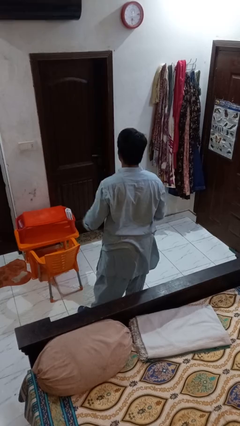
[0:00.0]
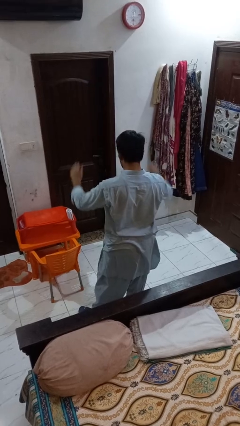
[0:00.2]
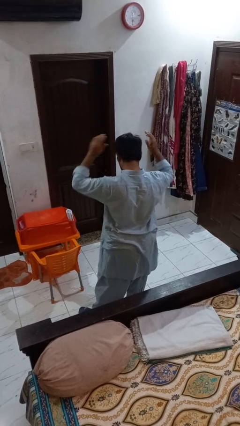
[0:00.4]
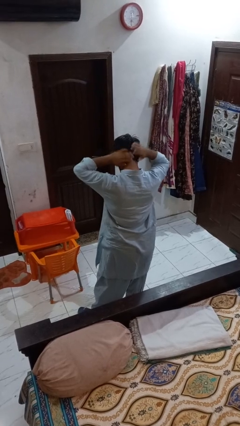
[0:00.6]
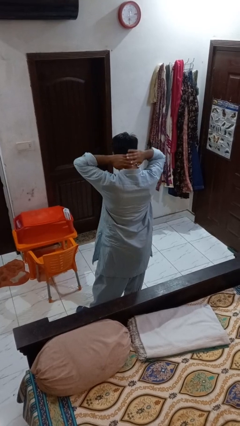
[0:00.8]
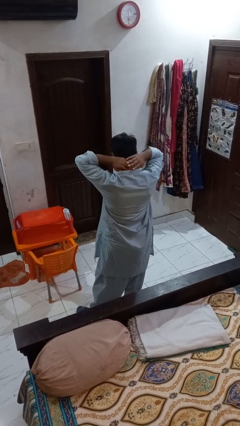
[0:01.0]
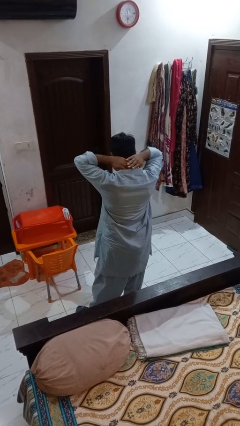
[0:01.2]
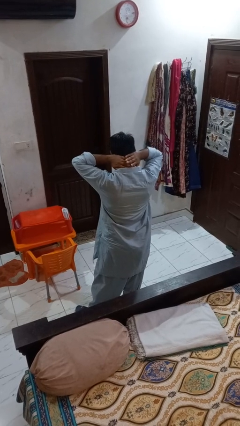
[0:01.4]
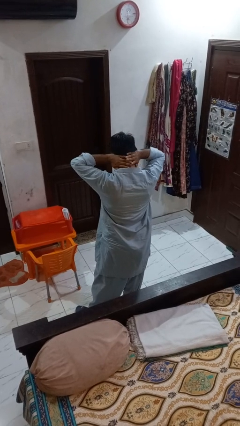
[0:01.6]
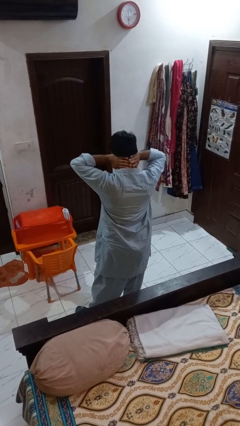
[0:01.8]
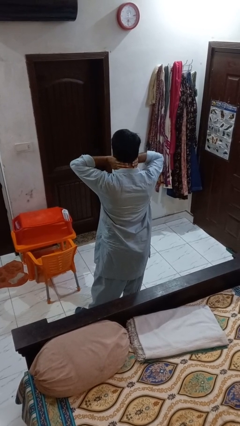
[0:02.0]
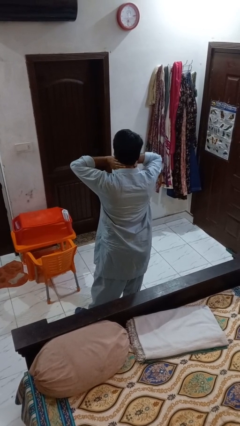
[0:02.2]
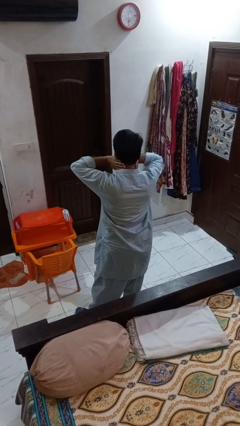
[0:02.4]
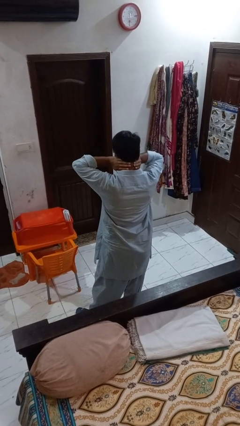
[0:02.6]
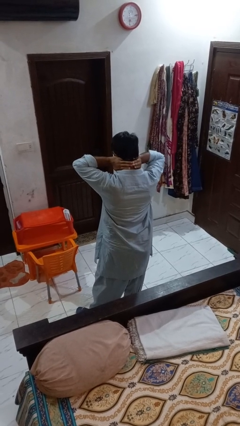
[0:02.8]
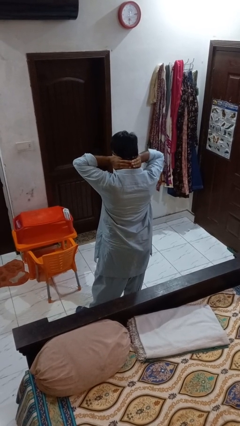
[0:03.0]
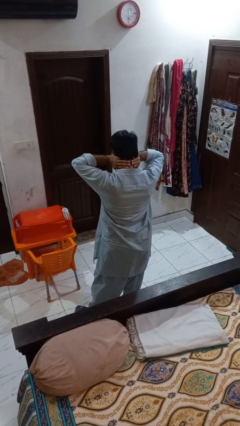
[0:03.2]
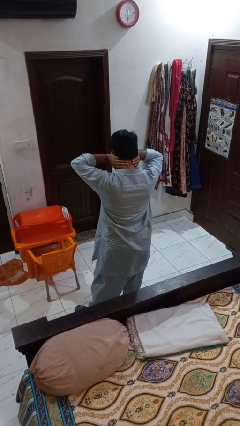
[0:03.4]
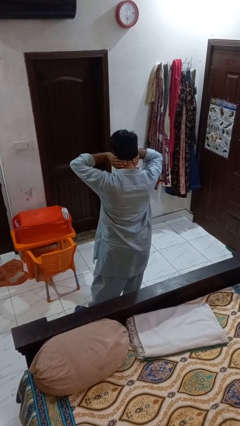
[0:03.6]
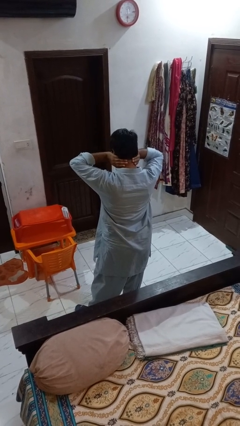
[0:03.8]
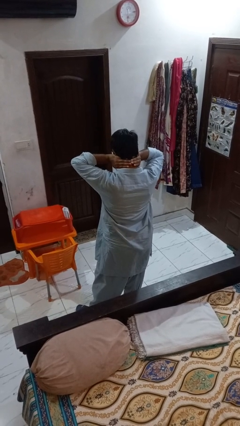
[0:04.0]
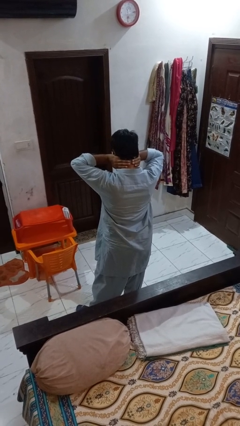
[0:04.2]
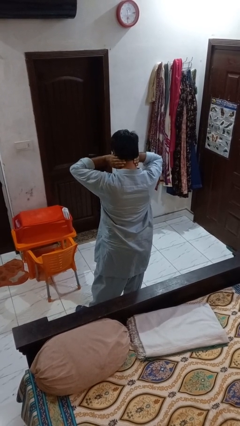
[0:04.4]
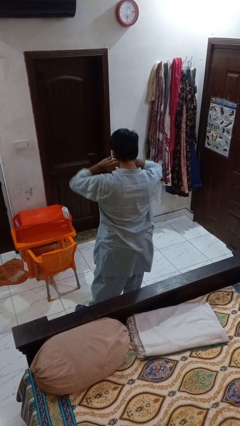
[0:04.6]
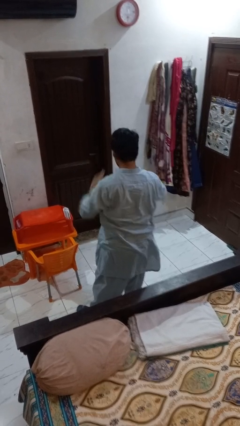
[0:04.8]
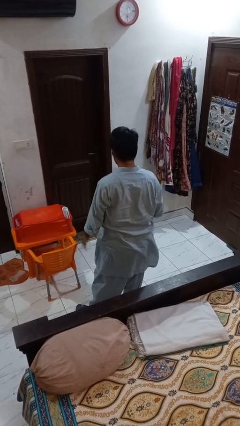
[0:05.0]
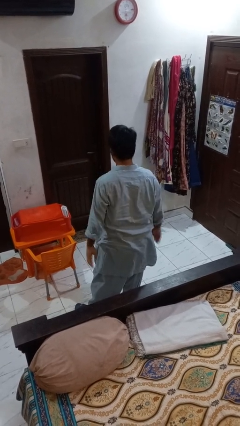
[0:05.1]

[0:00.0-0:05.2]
person rubs neck

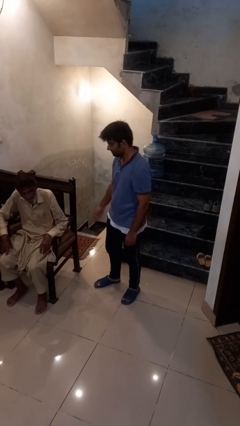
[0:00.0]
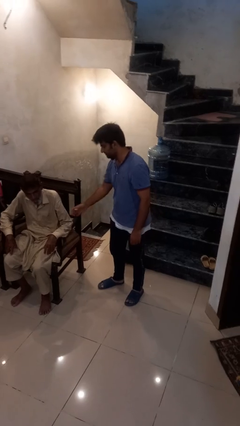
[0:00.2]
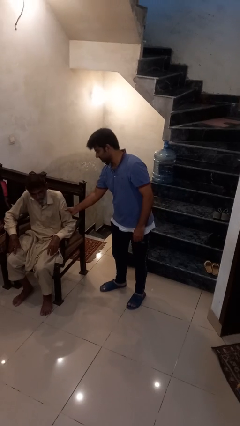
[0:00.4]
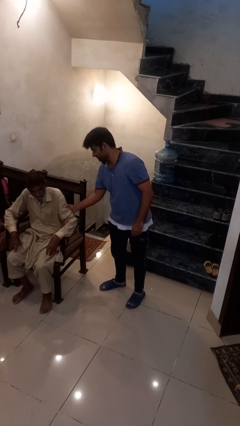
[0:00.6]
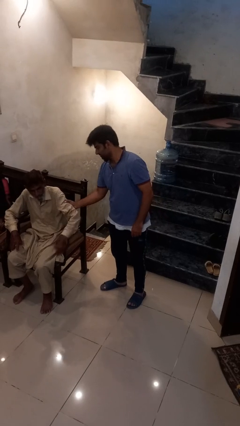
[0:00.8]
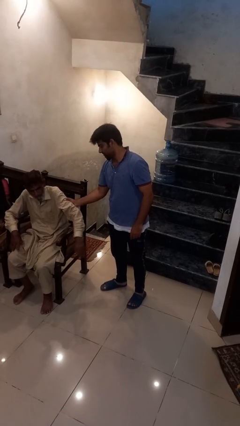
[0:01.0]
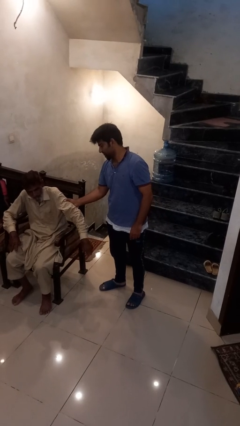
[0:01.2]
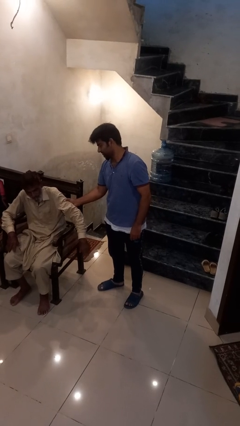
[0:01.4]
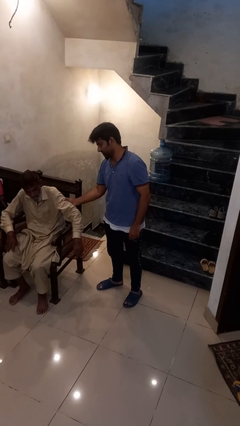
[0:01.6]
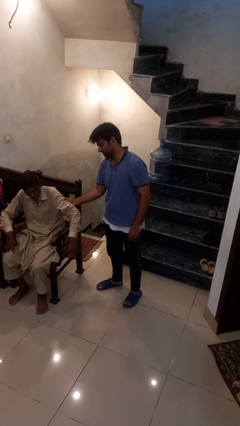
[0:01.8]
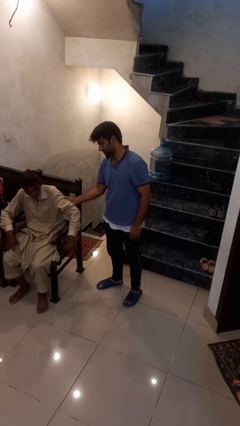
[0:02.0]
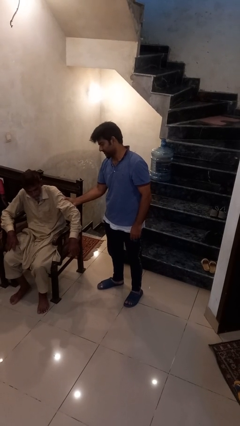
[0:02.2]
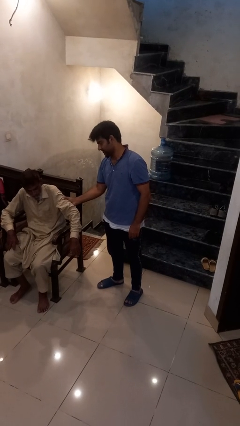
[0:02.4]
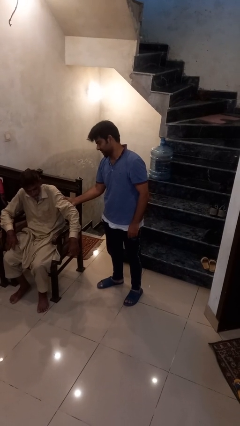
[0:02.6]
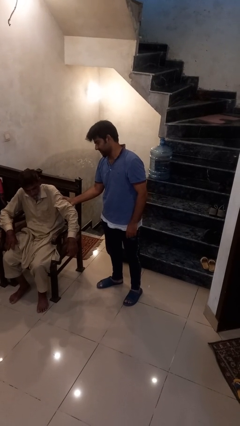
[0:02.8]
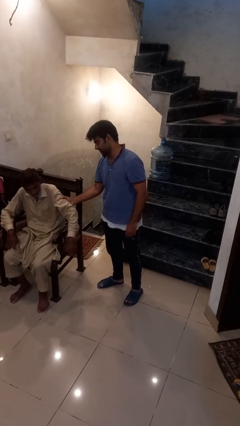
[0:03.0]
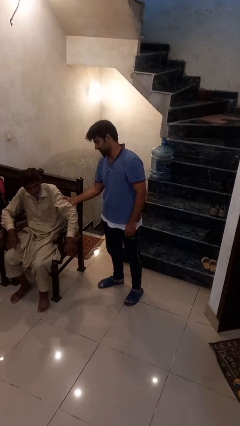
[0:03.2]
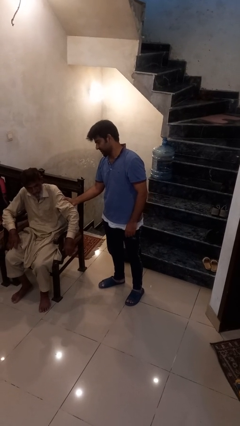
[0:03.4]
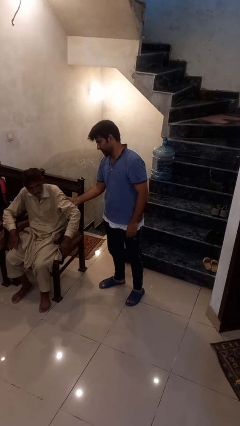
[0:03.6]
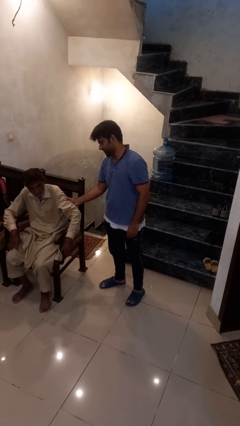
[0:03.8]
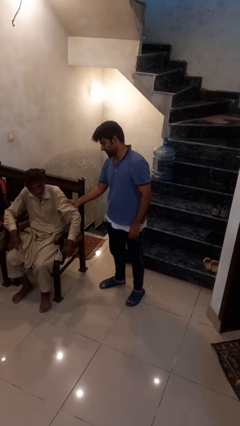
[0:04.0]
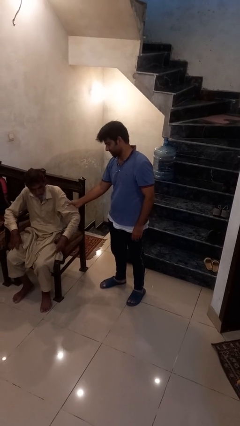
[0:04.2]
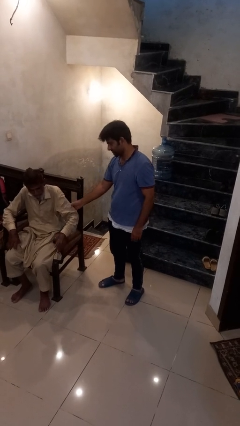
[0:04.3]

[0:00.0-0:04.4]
person grabs person by bicep

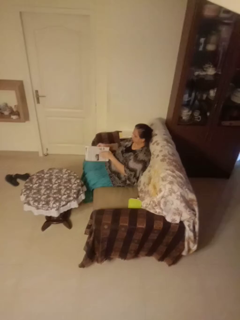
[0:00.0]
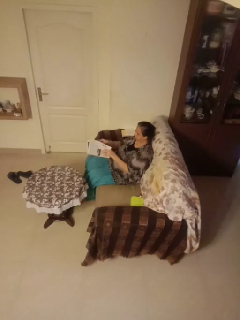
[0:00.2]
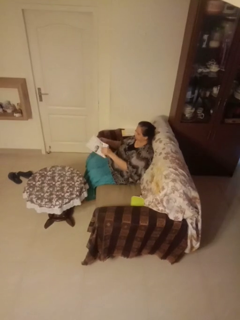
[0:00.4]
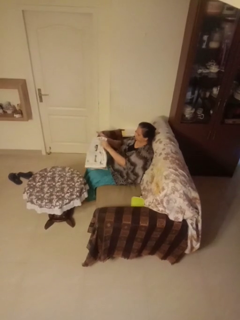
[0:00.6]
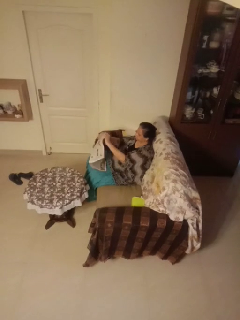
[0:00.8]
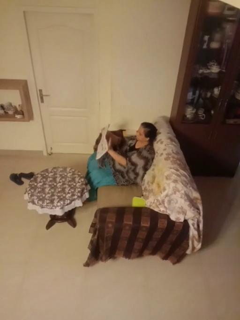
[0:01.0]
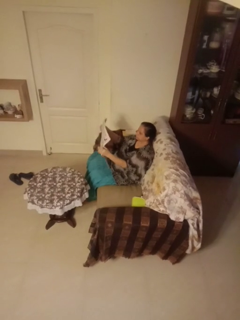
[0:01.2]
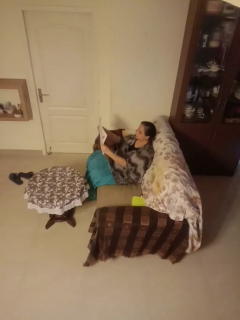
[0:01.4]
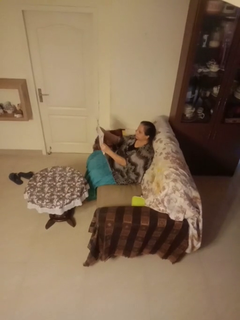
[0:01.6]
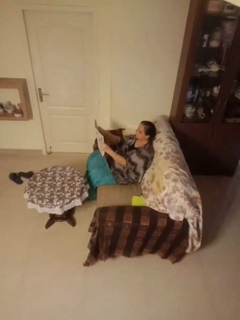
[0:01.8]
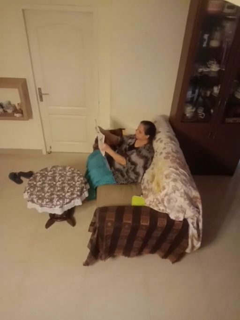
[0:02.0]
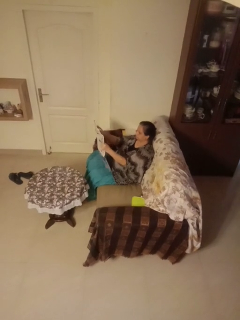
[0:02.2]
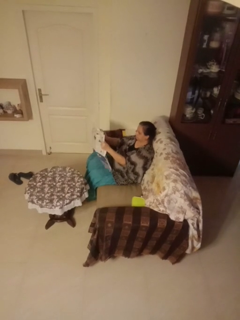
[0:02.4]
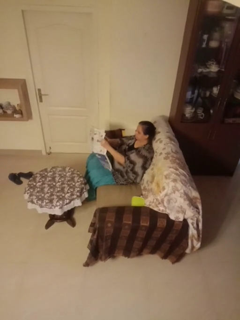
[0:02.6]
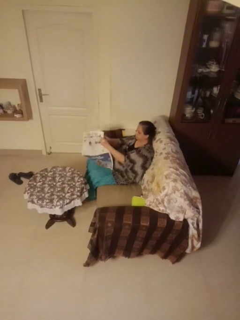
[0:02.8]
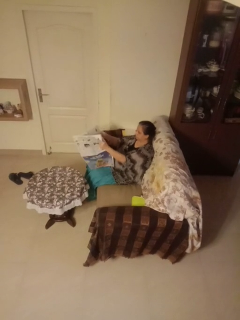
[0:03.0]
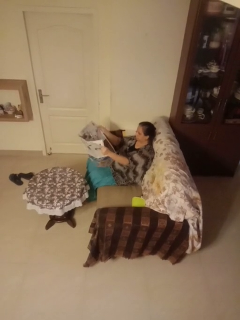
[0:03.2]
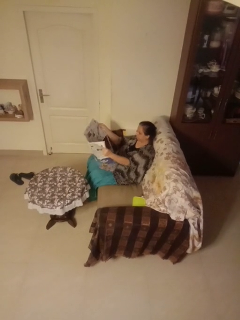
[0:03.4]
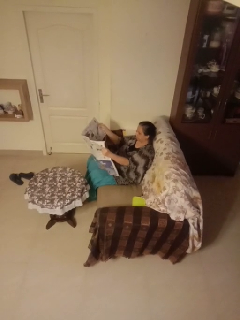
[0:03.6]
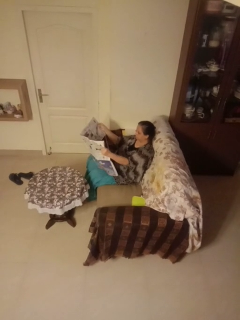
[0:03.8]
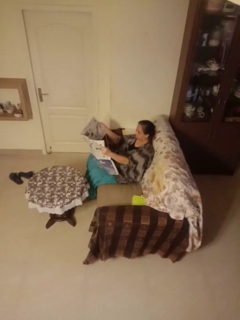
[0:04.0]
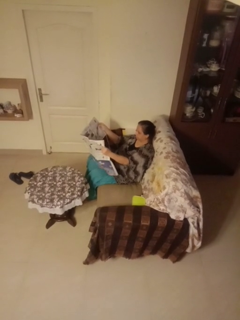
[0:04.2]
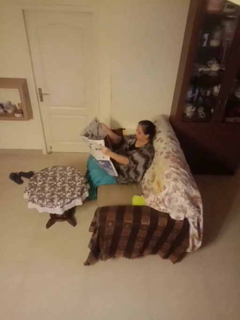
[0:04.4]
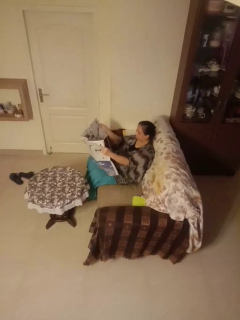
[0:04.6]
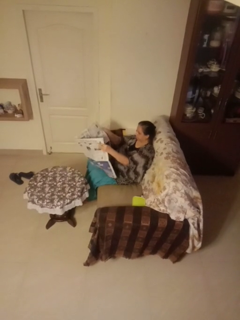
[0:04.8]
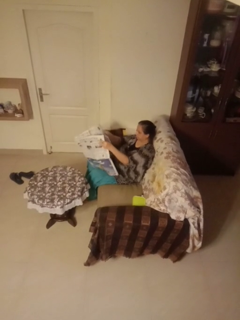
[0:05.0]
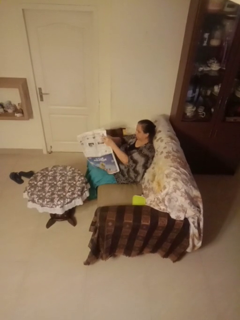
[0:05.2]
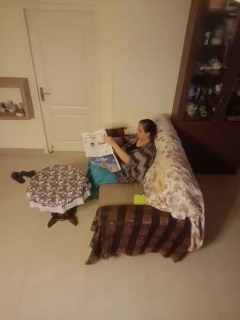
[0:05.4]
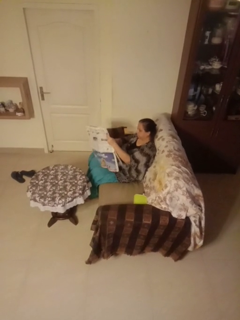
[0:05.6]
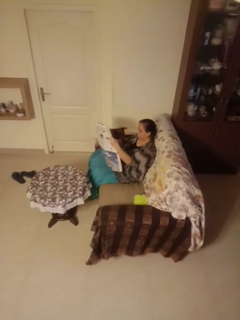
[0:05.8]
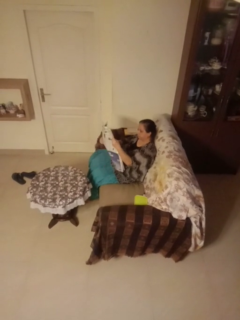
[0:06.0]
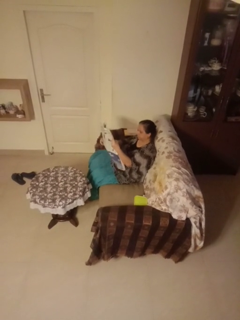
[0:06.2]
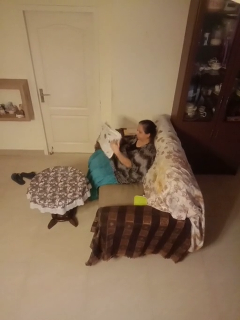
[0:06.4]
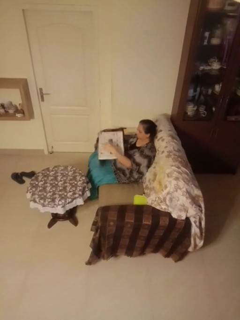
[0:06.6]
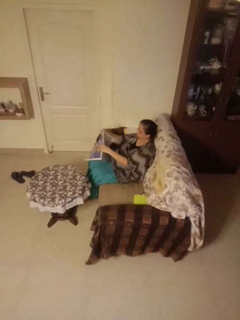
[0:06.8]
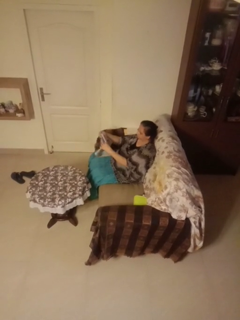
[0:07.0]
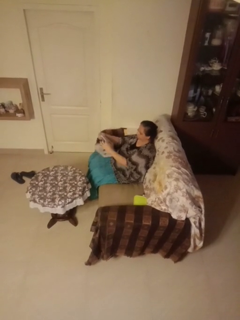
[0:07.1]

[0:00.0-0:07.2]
person reads newspaper

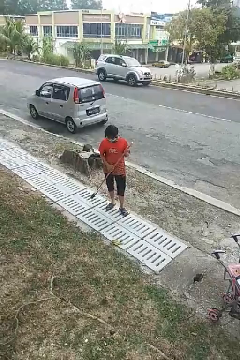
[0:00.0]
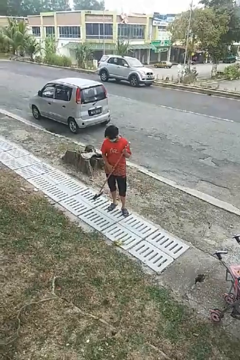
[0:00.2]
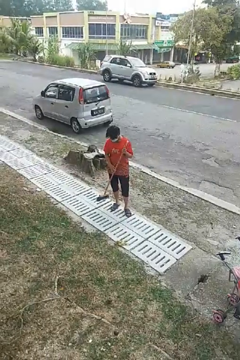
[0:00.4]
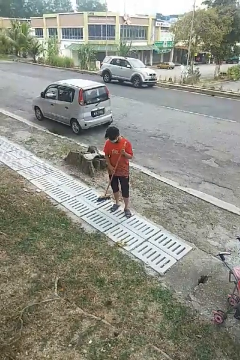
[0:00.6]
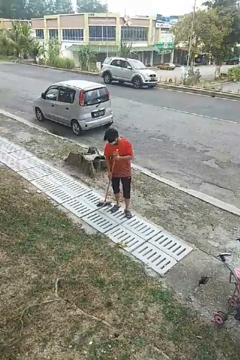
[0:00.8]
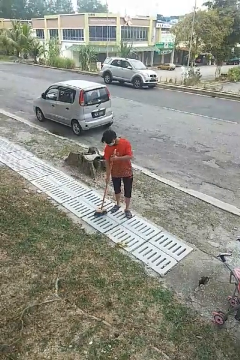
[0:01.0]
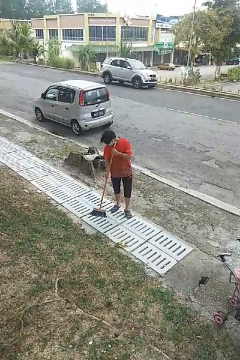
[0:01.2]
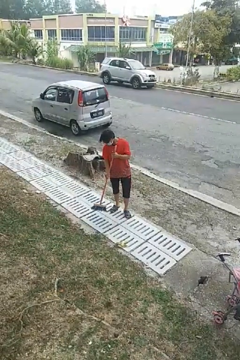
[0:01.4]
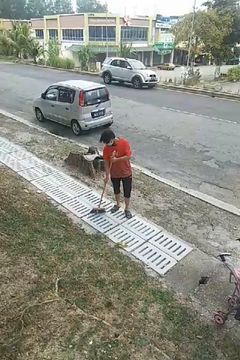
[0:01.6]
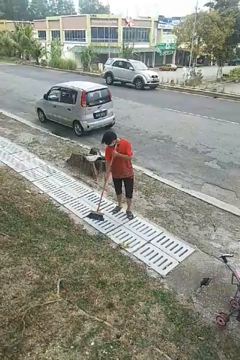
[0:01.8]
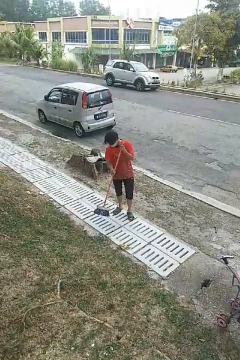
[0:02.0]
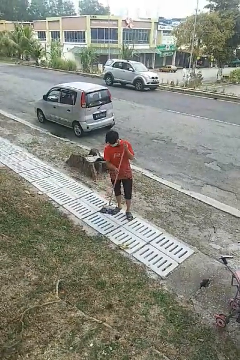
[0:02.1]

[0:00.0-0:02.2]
person sweeps floor

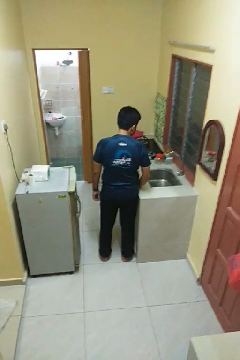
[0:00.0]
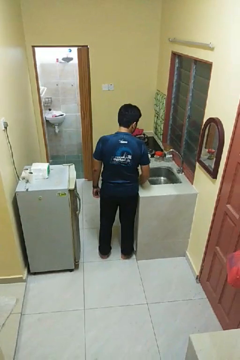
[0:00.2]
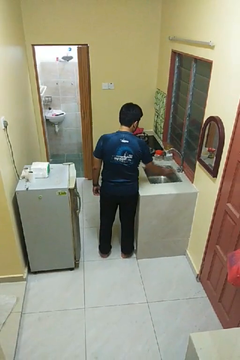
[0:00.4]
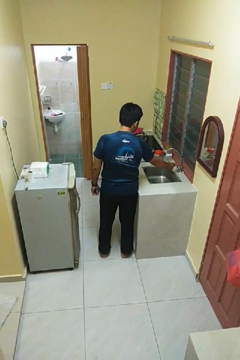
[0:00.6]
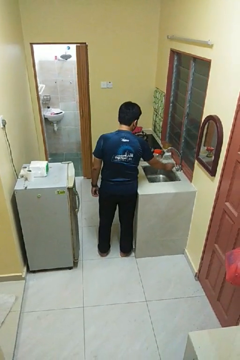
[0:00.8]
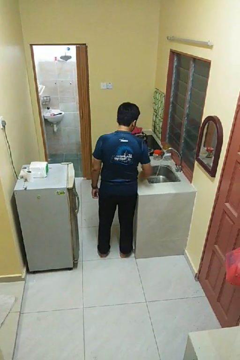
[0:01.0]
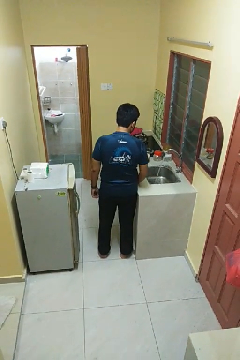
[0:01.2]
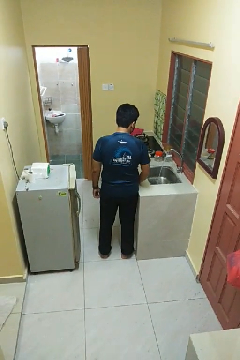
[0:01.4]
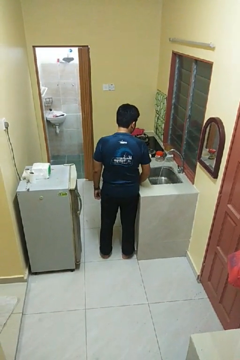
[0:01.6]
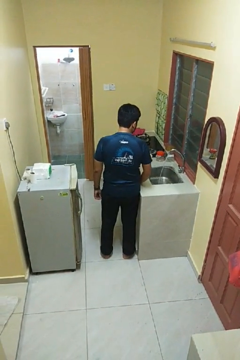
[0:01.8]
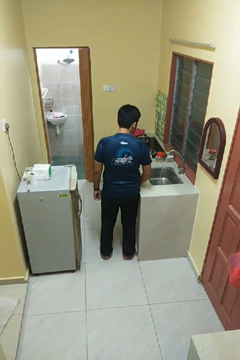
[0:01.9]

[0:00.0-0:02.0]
person turns on faucet
